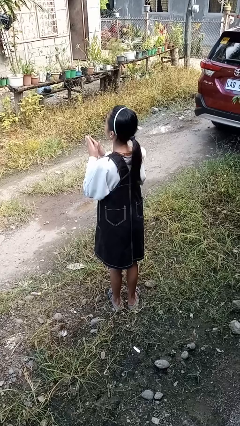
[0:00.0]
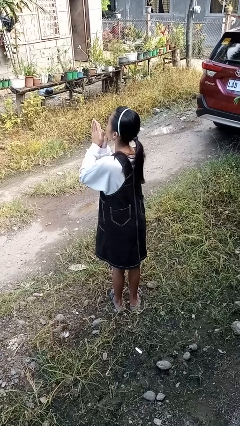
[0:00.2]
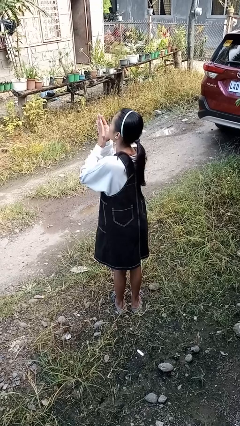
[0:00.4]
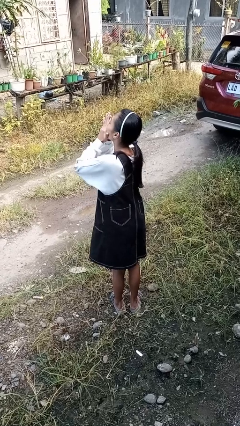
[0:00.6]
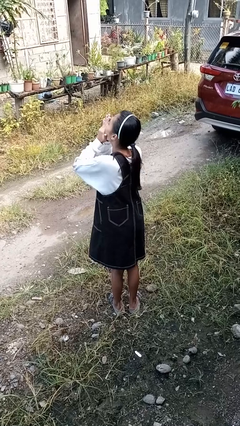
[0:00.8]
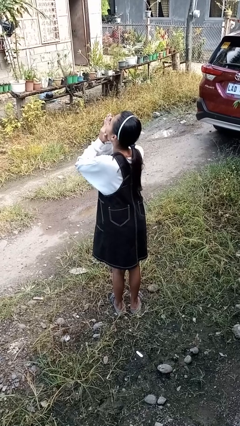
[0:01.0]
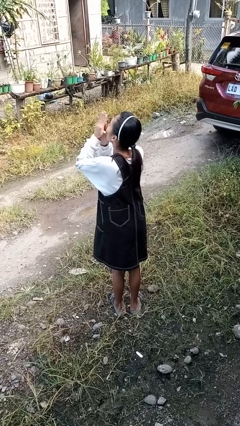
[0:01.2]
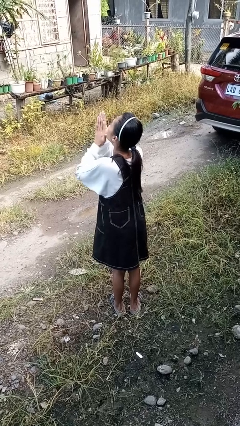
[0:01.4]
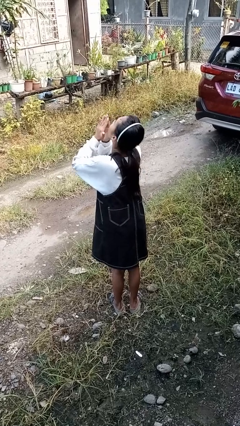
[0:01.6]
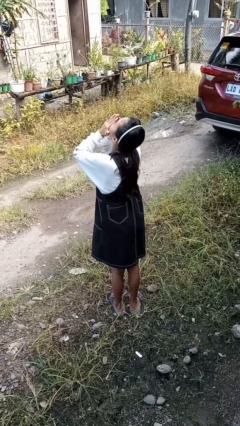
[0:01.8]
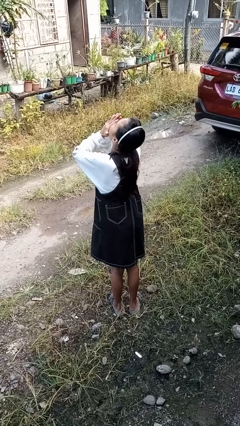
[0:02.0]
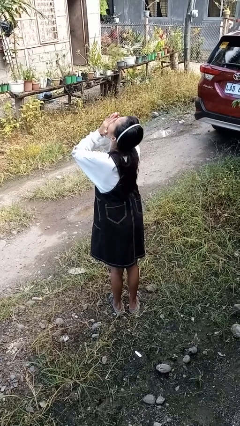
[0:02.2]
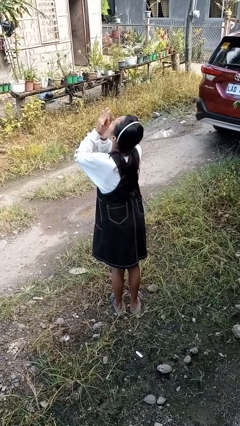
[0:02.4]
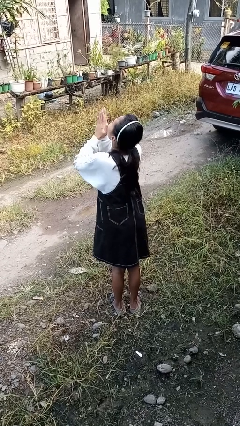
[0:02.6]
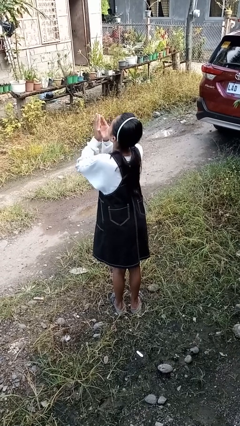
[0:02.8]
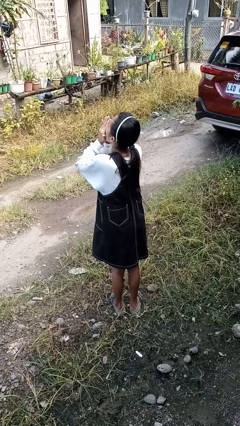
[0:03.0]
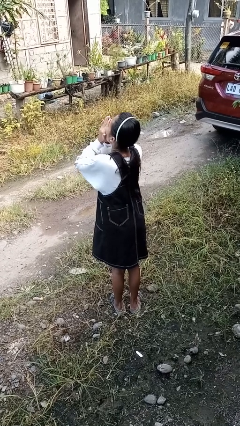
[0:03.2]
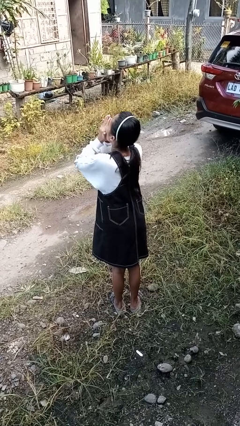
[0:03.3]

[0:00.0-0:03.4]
person blows into hands

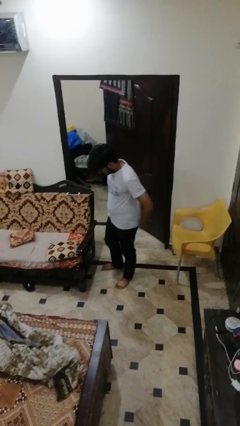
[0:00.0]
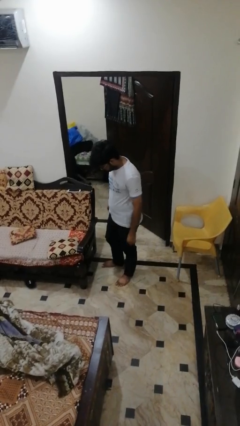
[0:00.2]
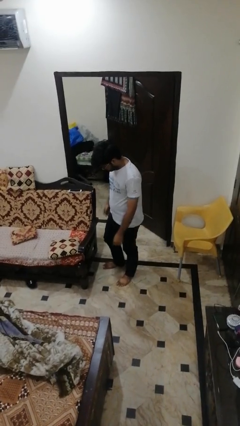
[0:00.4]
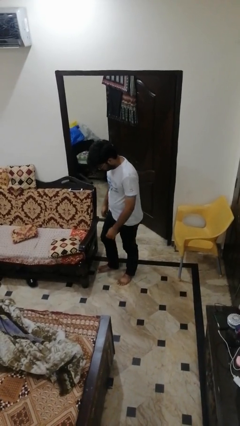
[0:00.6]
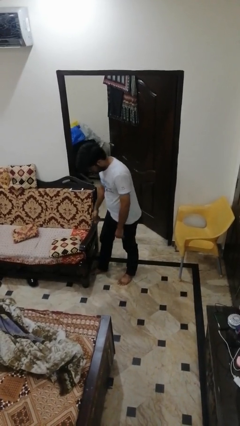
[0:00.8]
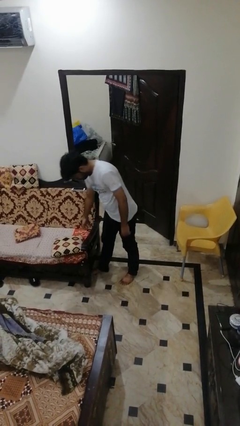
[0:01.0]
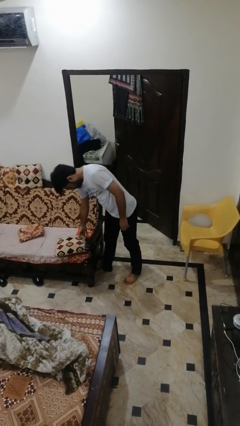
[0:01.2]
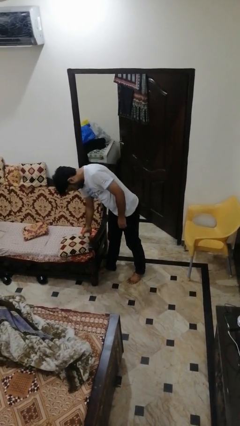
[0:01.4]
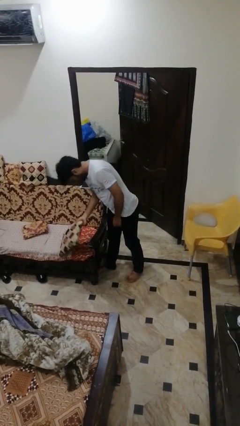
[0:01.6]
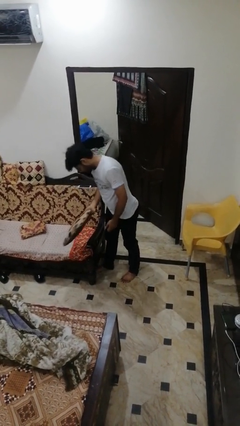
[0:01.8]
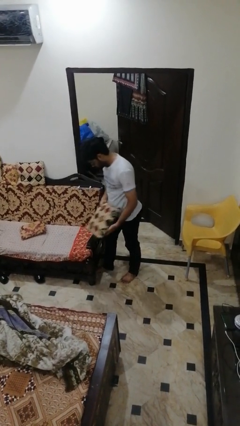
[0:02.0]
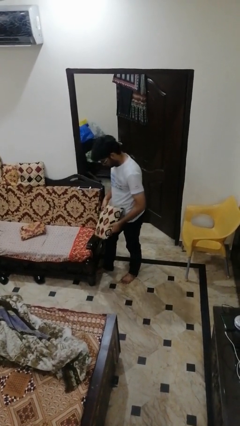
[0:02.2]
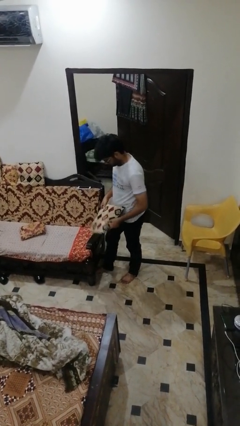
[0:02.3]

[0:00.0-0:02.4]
person picks up object from couch

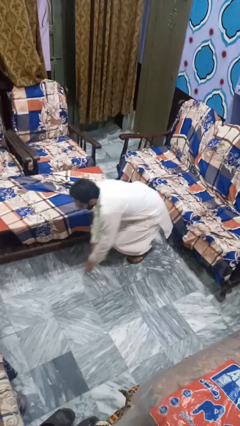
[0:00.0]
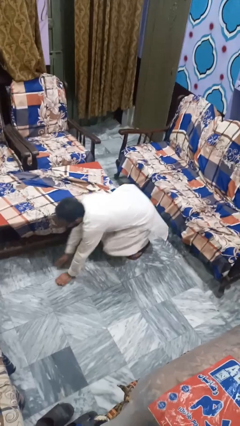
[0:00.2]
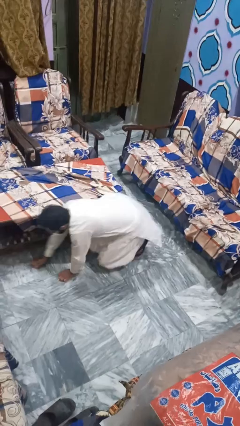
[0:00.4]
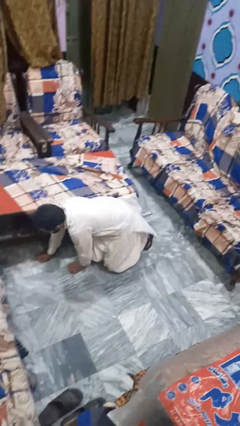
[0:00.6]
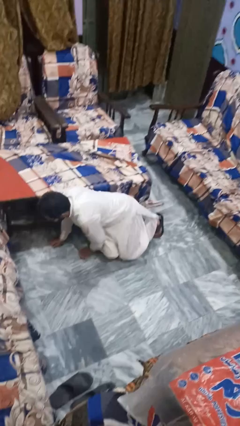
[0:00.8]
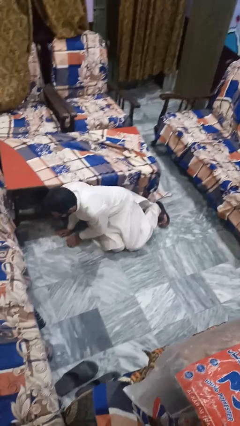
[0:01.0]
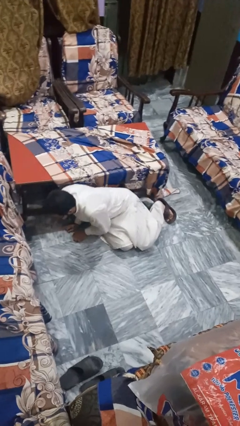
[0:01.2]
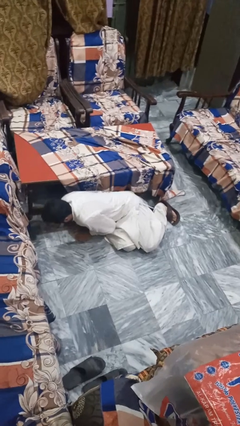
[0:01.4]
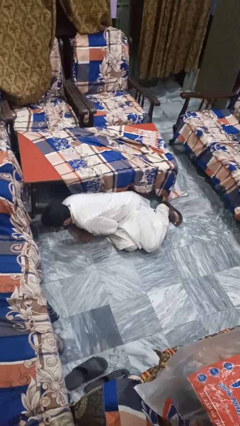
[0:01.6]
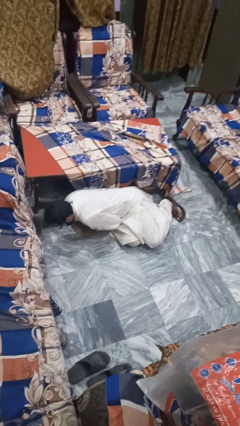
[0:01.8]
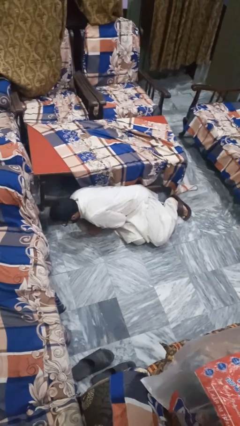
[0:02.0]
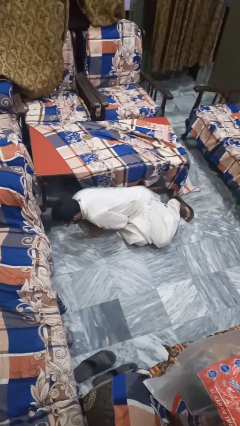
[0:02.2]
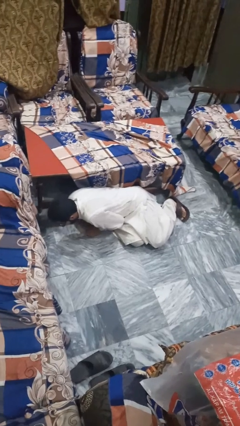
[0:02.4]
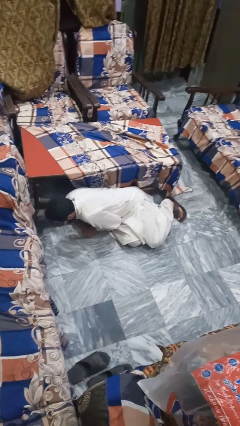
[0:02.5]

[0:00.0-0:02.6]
person lies down on floor

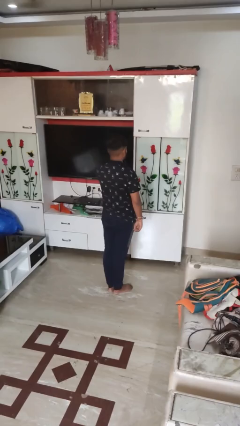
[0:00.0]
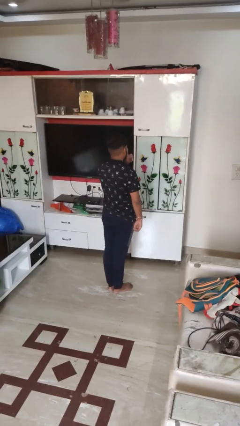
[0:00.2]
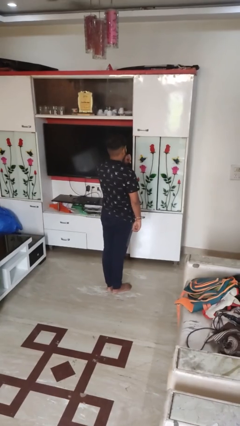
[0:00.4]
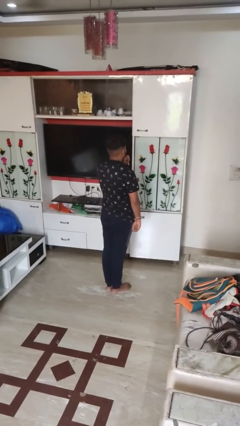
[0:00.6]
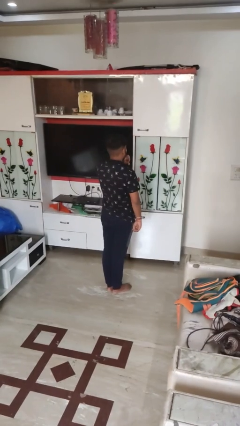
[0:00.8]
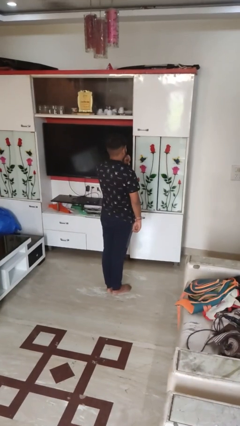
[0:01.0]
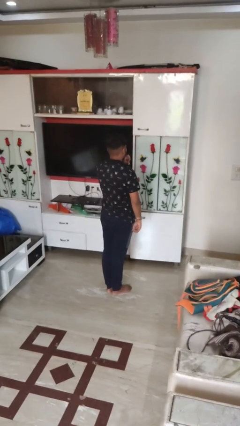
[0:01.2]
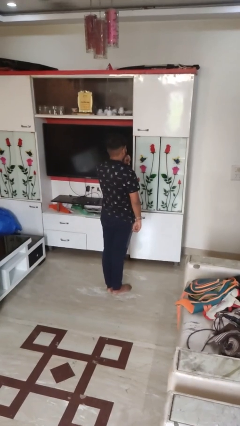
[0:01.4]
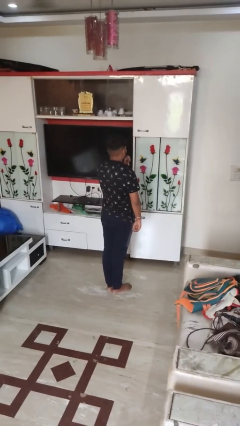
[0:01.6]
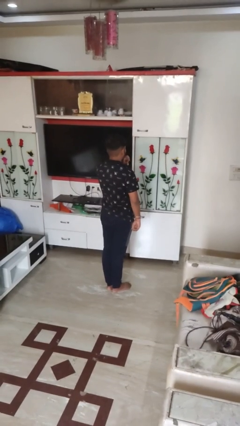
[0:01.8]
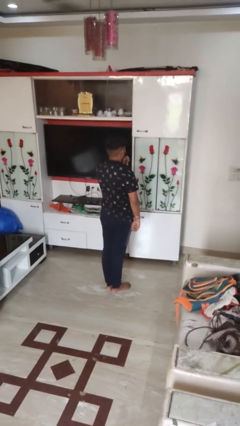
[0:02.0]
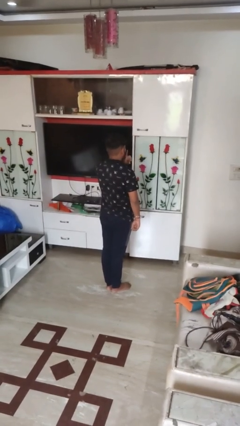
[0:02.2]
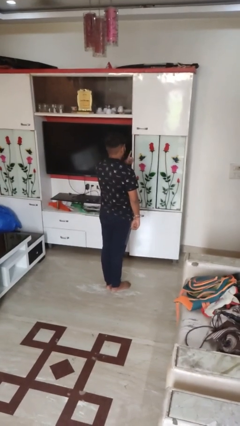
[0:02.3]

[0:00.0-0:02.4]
person gestures be quiet

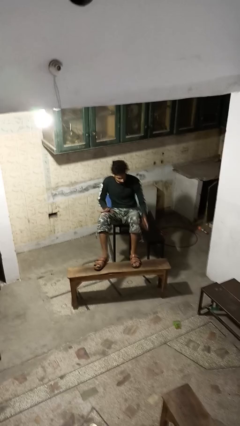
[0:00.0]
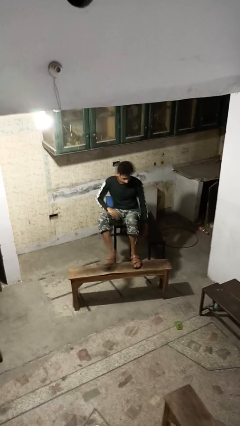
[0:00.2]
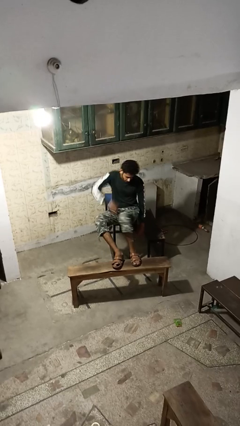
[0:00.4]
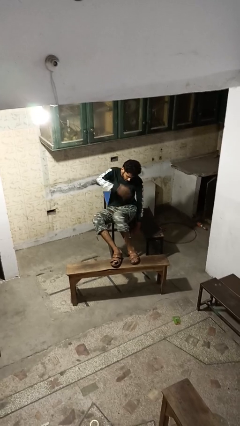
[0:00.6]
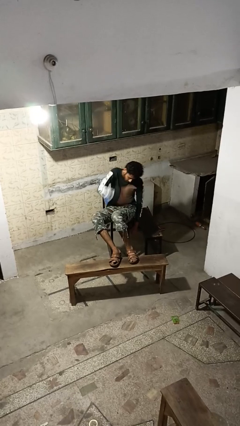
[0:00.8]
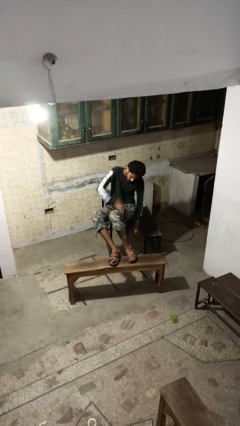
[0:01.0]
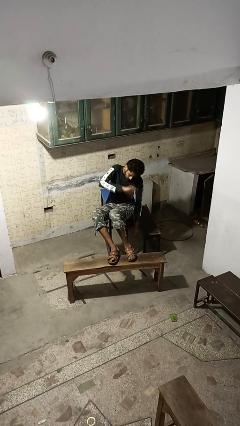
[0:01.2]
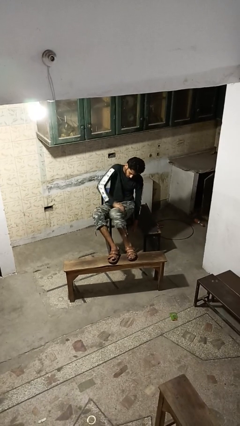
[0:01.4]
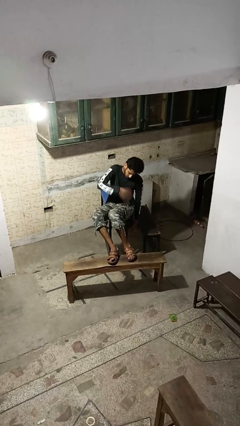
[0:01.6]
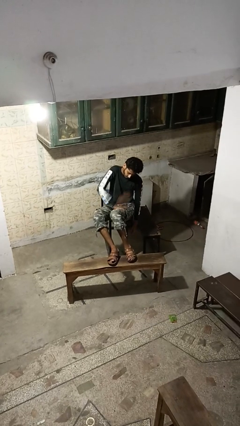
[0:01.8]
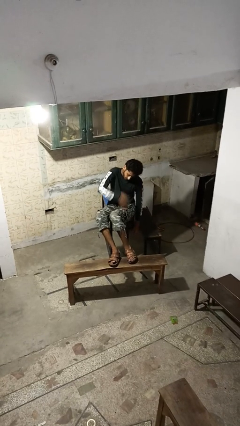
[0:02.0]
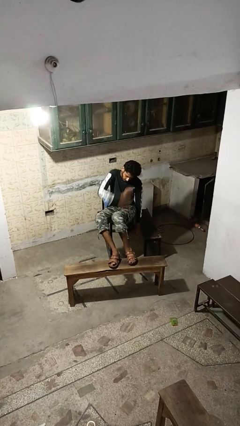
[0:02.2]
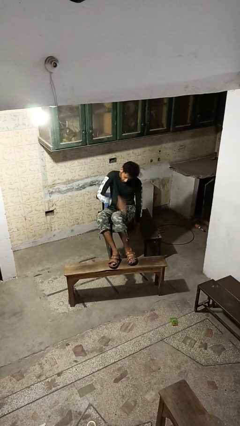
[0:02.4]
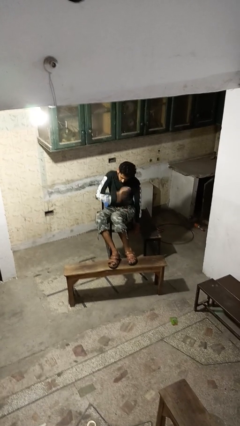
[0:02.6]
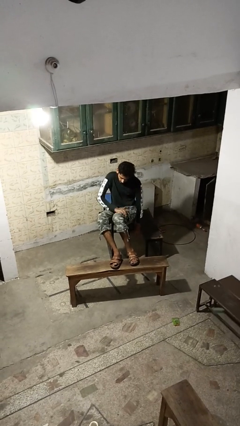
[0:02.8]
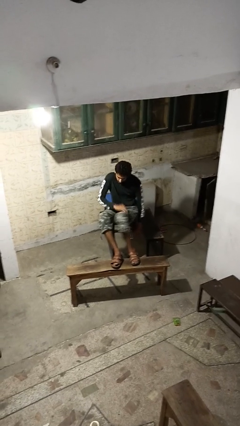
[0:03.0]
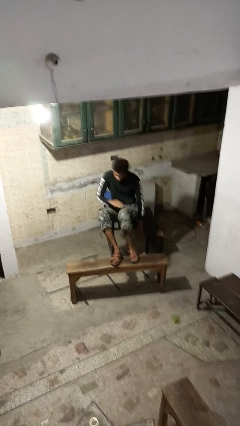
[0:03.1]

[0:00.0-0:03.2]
person slaps hands on thighs

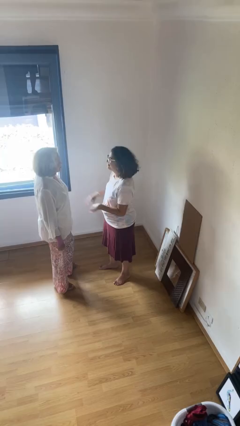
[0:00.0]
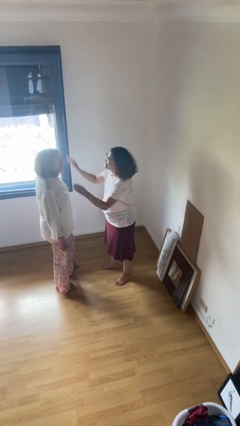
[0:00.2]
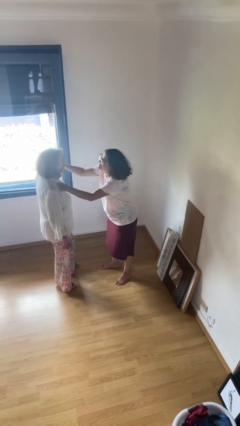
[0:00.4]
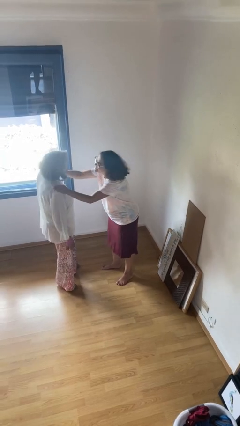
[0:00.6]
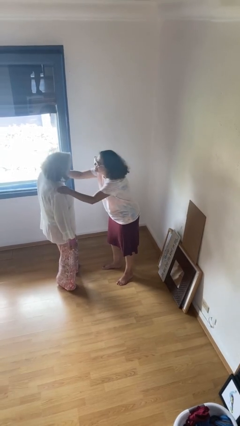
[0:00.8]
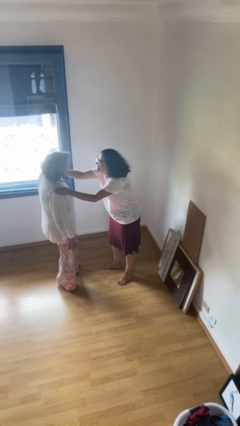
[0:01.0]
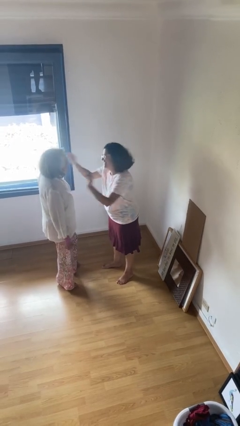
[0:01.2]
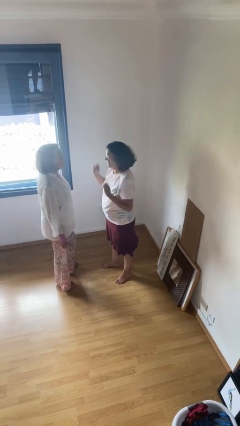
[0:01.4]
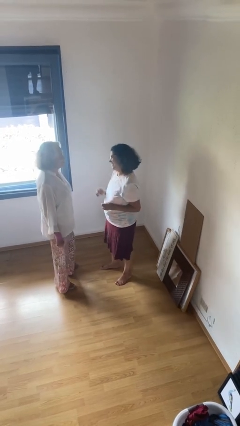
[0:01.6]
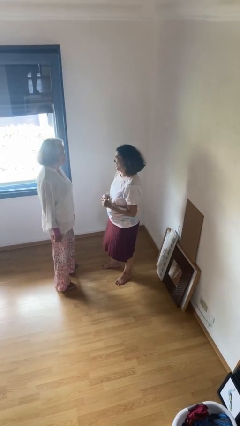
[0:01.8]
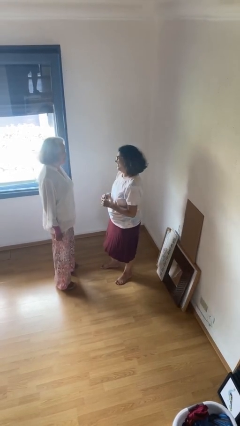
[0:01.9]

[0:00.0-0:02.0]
person pounds shoulders of person

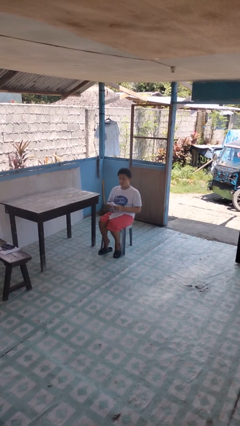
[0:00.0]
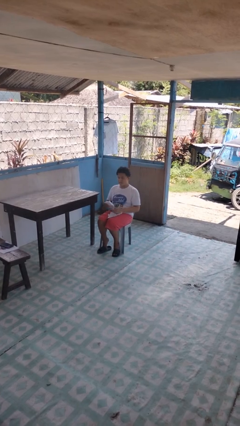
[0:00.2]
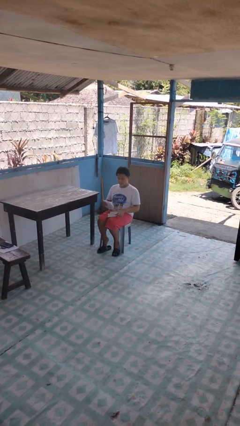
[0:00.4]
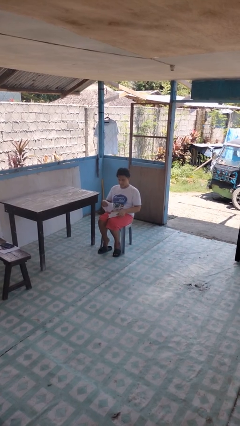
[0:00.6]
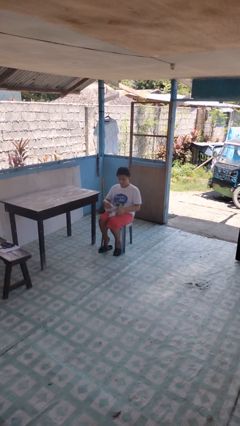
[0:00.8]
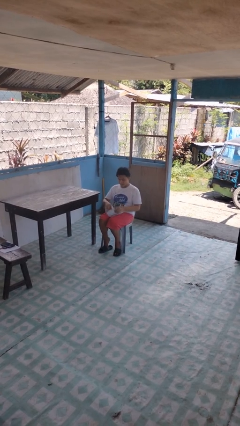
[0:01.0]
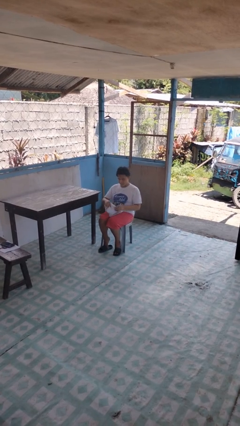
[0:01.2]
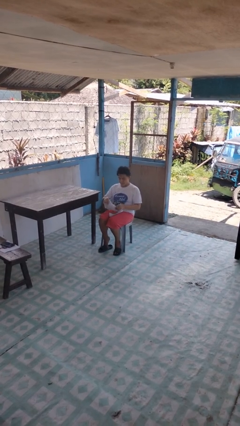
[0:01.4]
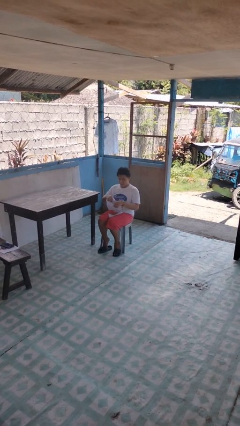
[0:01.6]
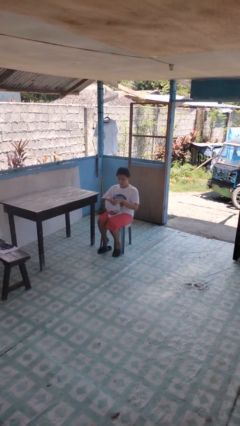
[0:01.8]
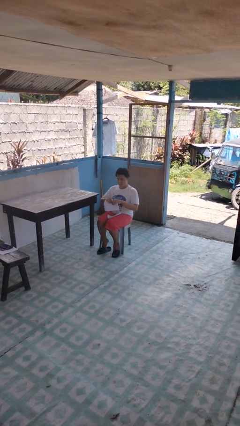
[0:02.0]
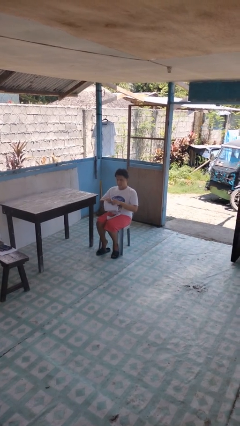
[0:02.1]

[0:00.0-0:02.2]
person tears paper
